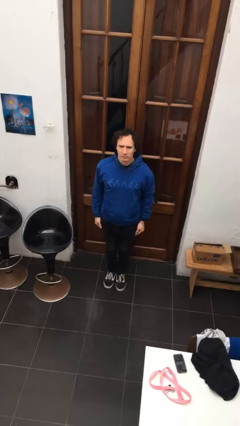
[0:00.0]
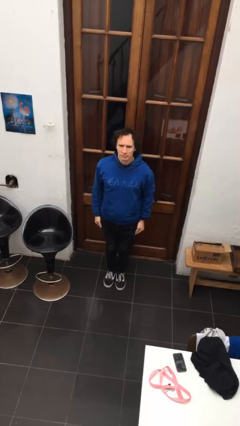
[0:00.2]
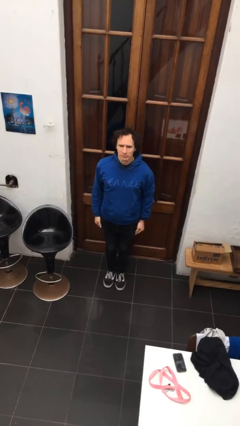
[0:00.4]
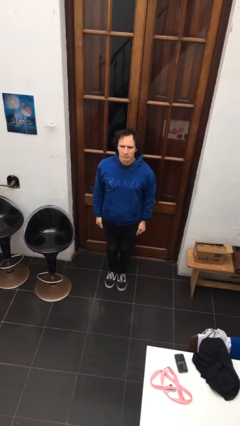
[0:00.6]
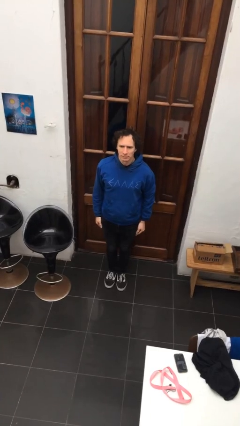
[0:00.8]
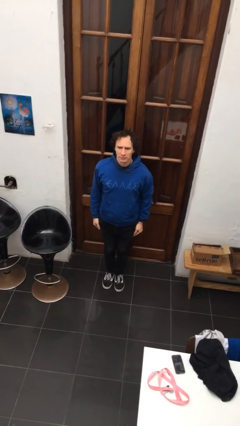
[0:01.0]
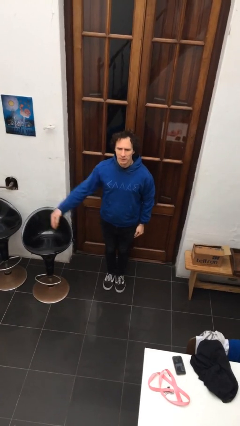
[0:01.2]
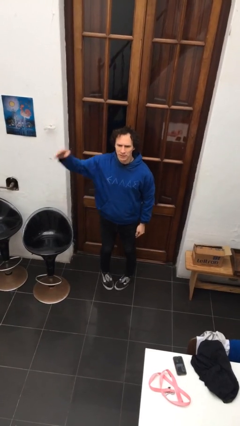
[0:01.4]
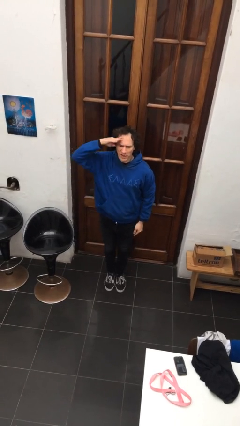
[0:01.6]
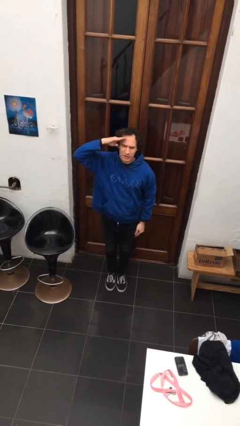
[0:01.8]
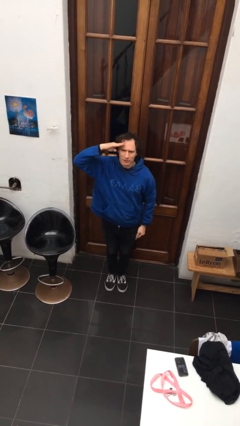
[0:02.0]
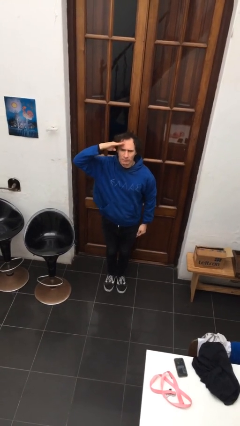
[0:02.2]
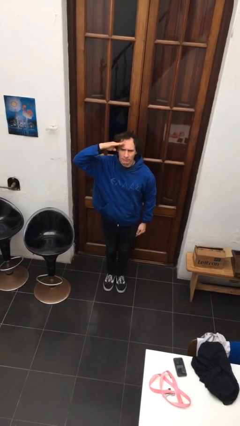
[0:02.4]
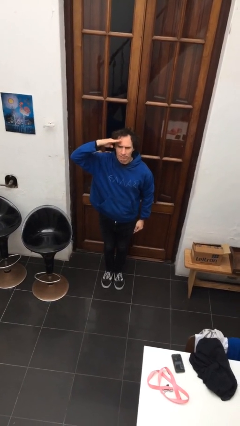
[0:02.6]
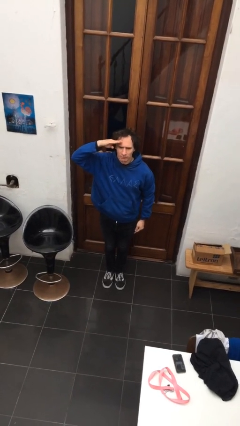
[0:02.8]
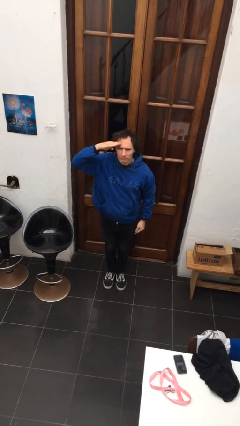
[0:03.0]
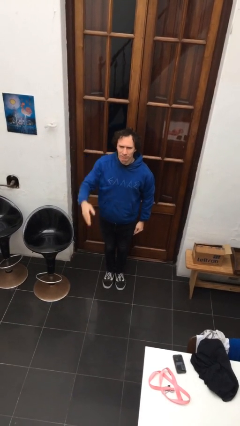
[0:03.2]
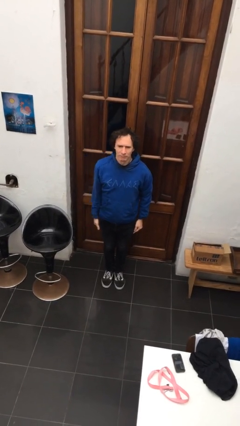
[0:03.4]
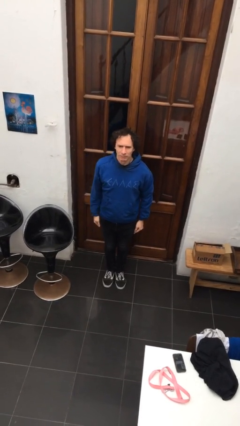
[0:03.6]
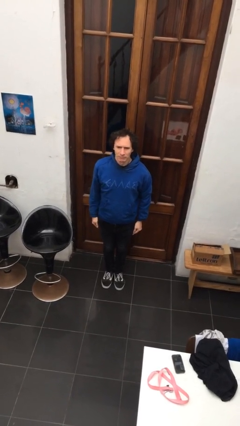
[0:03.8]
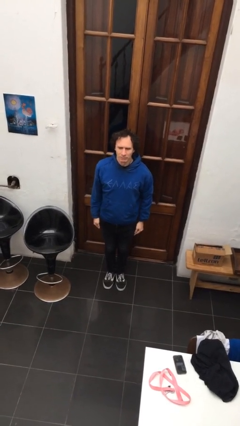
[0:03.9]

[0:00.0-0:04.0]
person salutes

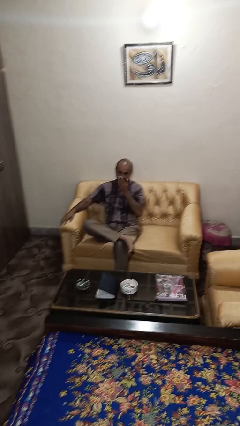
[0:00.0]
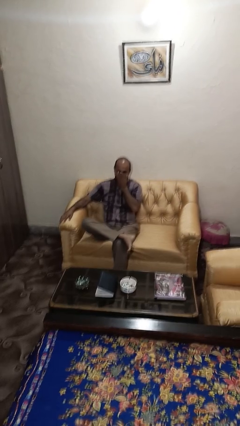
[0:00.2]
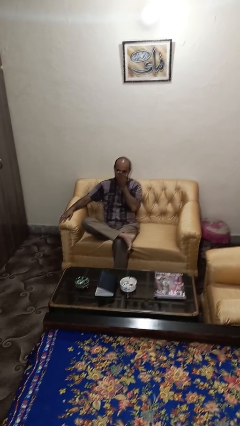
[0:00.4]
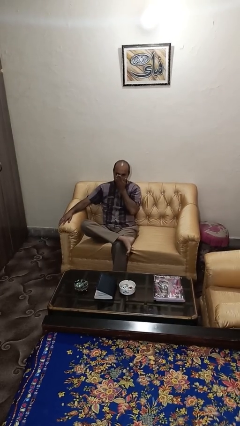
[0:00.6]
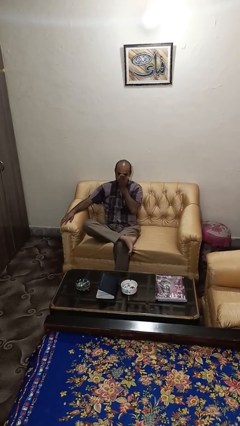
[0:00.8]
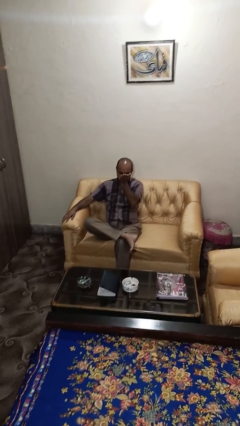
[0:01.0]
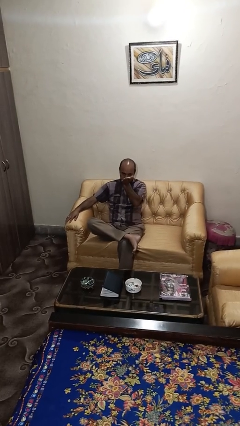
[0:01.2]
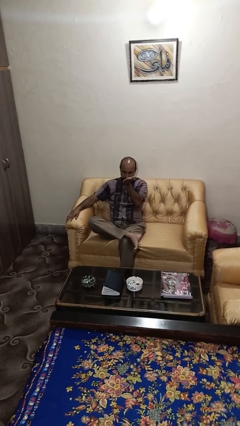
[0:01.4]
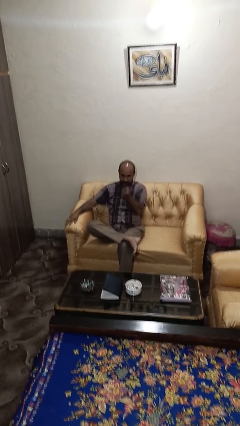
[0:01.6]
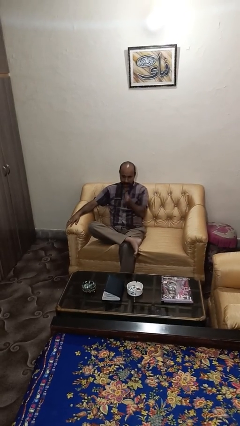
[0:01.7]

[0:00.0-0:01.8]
person gestures blow kiss

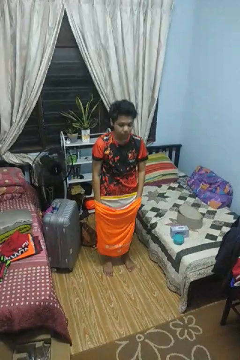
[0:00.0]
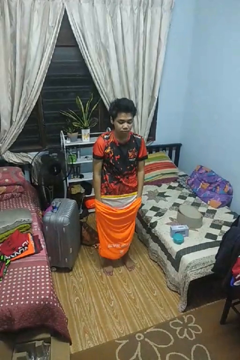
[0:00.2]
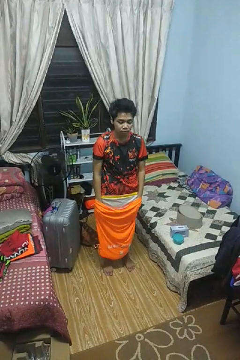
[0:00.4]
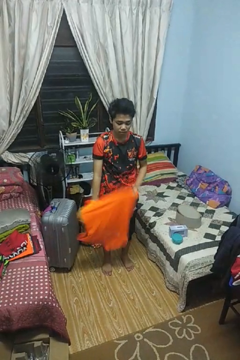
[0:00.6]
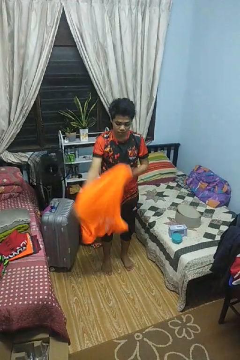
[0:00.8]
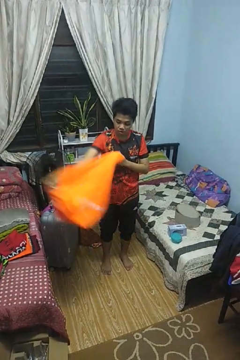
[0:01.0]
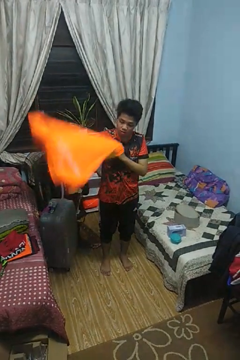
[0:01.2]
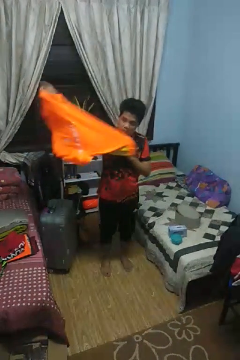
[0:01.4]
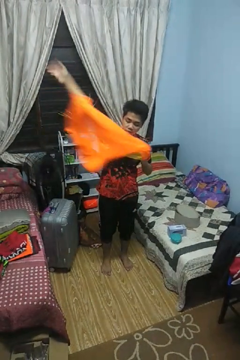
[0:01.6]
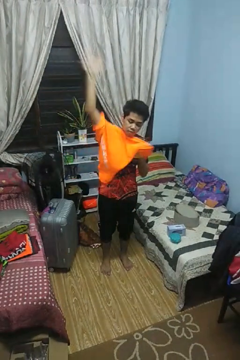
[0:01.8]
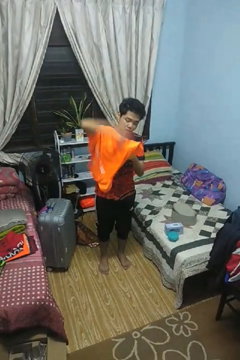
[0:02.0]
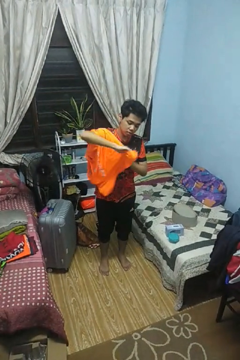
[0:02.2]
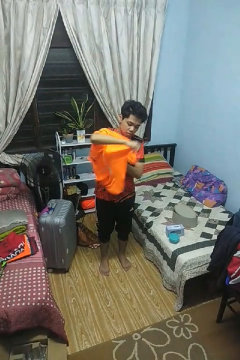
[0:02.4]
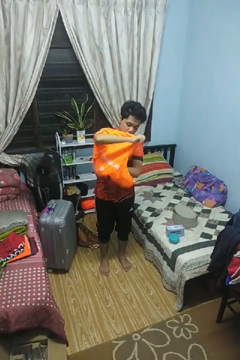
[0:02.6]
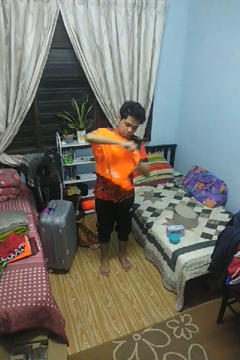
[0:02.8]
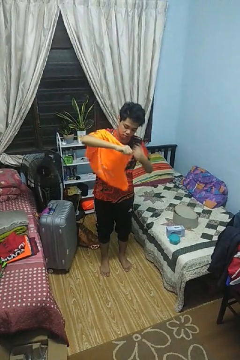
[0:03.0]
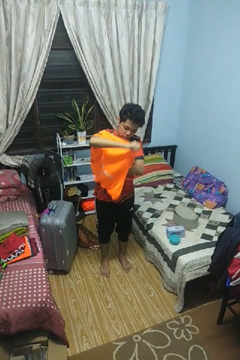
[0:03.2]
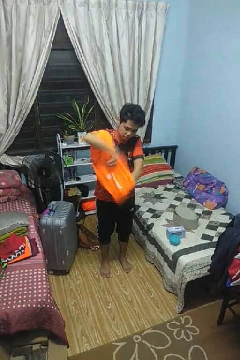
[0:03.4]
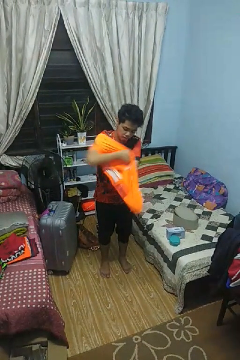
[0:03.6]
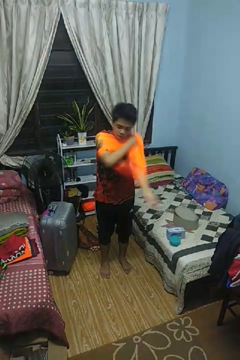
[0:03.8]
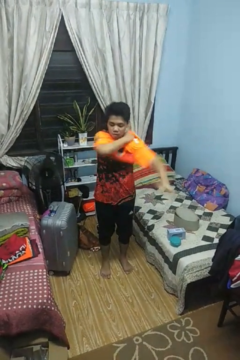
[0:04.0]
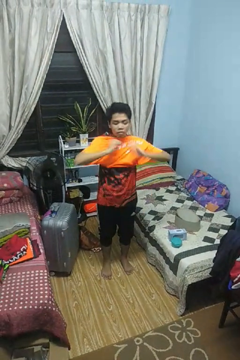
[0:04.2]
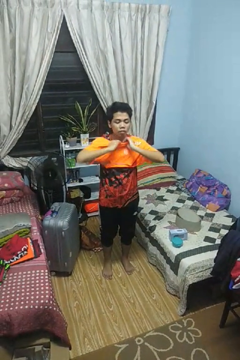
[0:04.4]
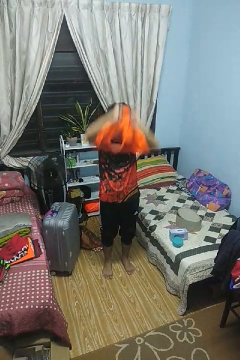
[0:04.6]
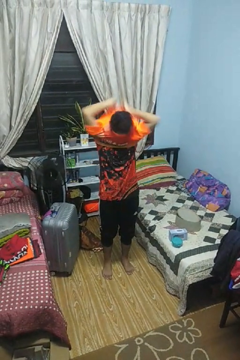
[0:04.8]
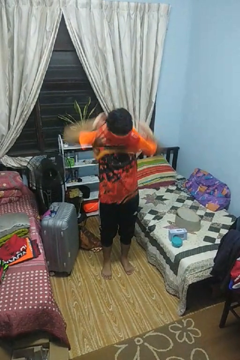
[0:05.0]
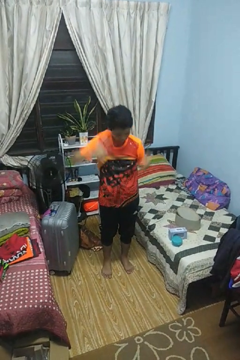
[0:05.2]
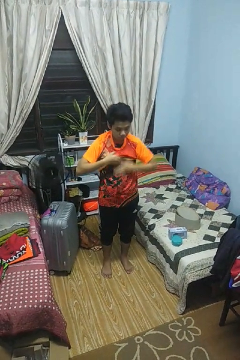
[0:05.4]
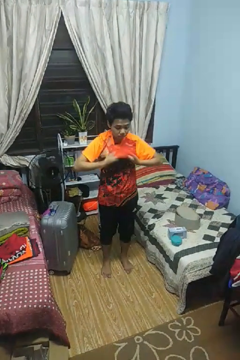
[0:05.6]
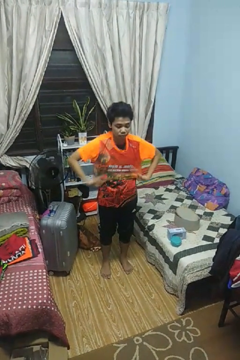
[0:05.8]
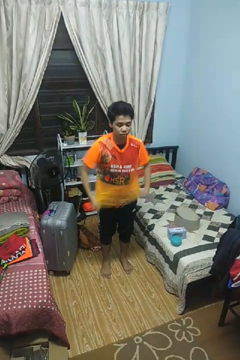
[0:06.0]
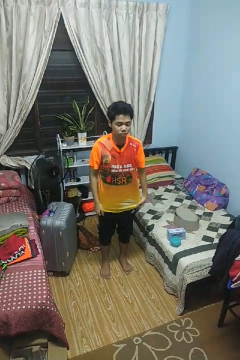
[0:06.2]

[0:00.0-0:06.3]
person puts on shirt

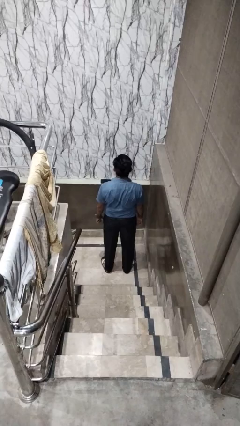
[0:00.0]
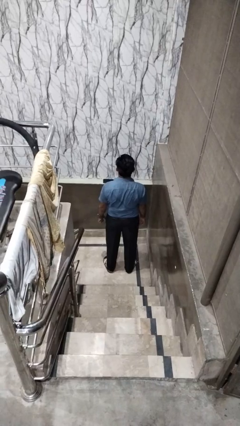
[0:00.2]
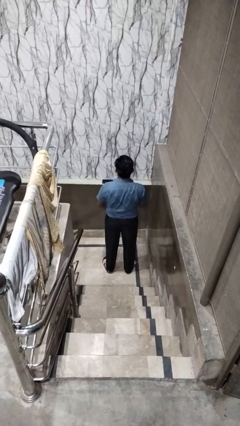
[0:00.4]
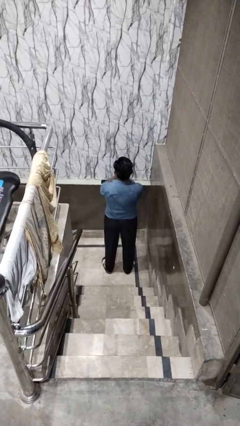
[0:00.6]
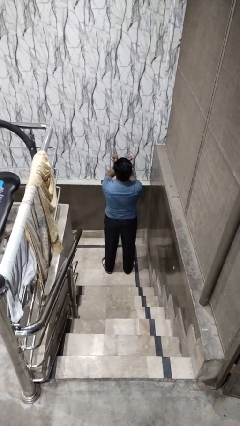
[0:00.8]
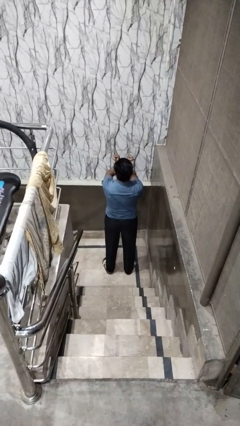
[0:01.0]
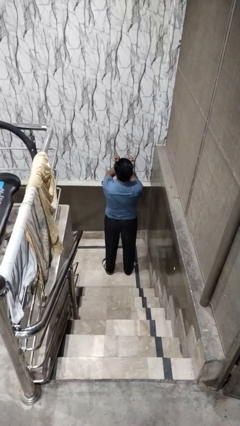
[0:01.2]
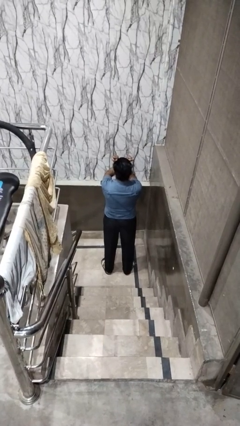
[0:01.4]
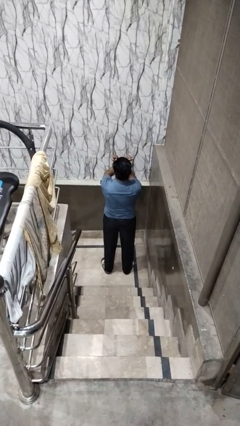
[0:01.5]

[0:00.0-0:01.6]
person gestures arms x

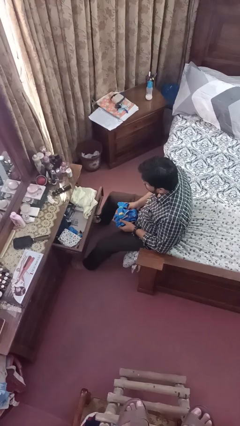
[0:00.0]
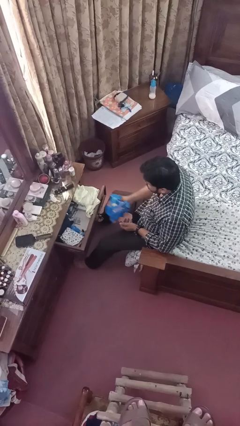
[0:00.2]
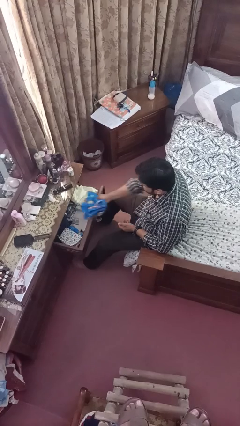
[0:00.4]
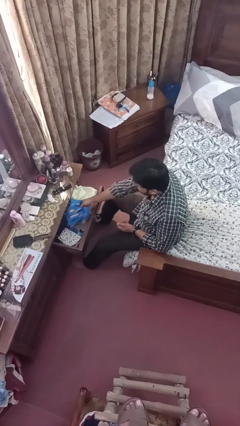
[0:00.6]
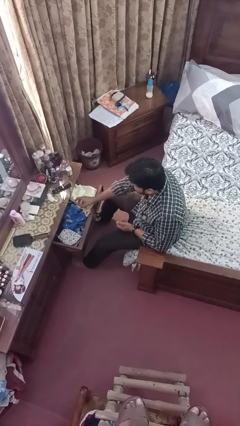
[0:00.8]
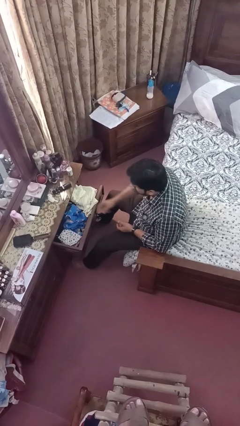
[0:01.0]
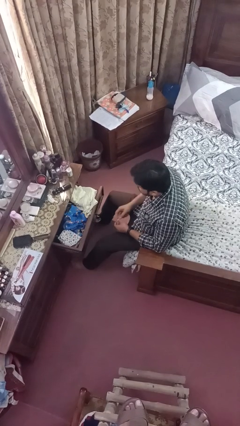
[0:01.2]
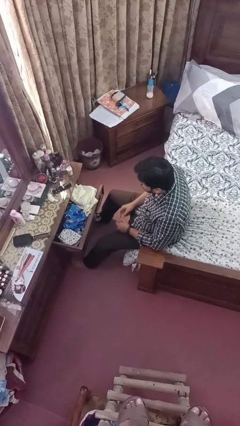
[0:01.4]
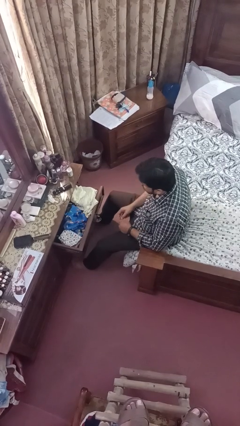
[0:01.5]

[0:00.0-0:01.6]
person puts clothes into dresser

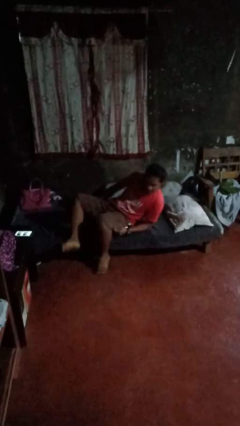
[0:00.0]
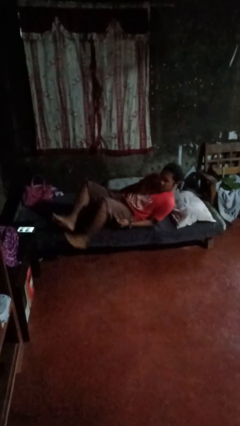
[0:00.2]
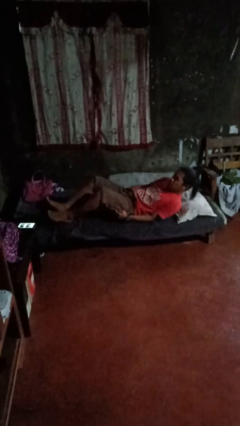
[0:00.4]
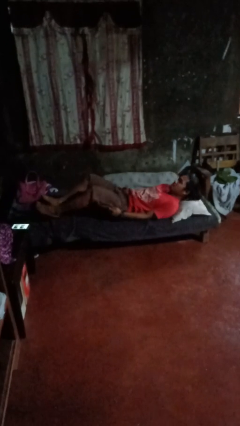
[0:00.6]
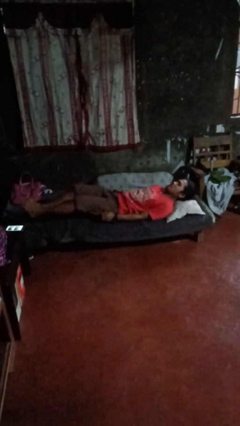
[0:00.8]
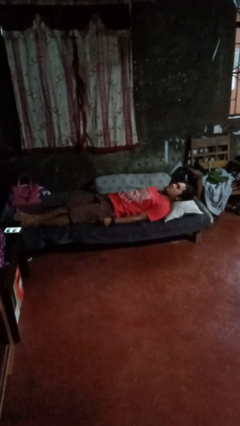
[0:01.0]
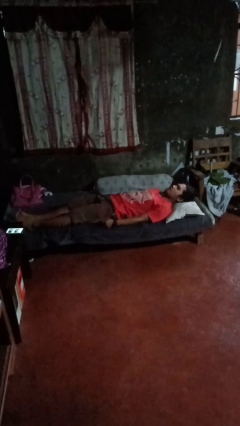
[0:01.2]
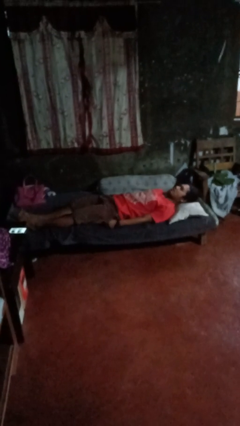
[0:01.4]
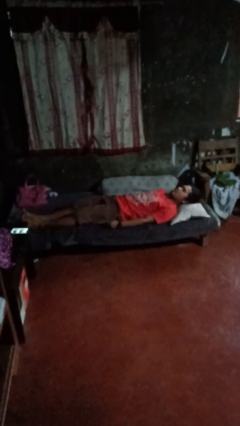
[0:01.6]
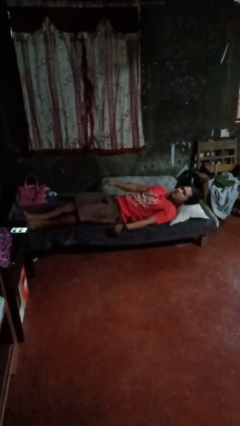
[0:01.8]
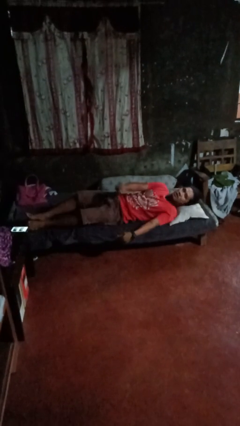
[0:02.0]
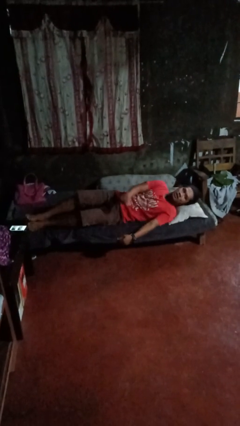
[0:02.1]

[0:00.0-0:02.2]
person lies down on bed

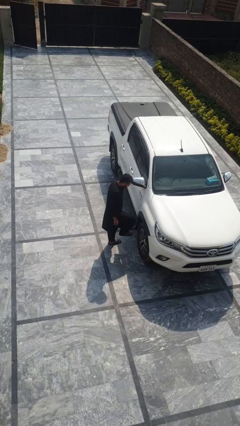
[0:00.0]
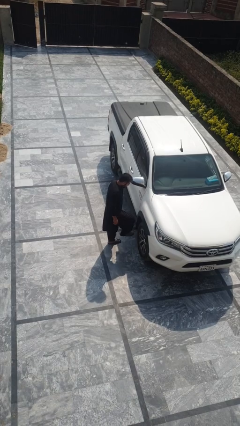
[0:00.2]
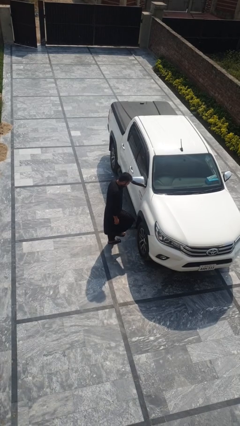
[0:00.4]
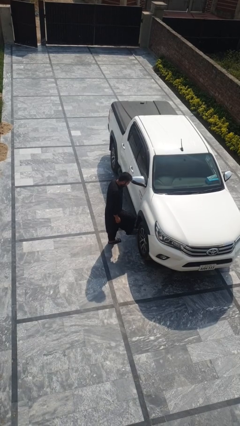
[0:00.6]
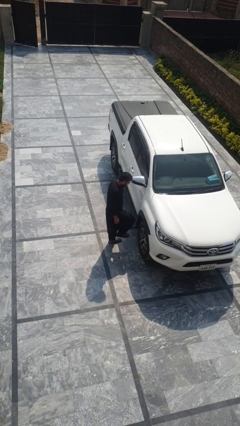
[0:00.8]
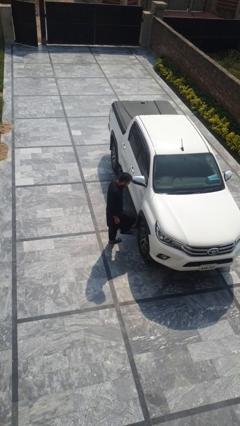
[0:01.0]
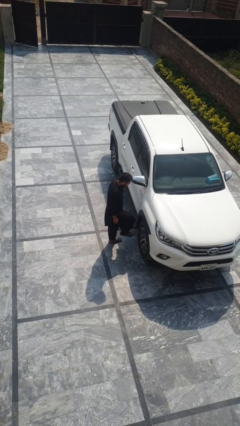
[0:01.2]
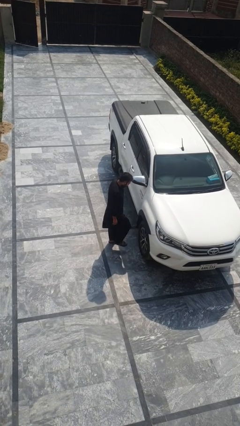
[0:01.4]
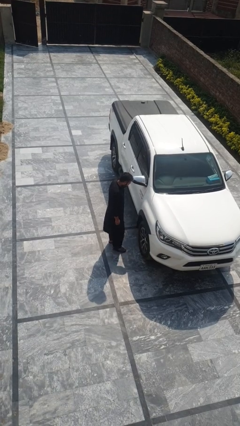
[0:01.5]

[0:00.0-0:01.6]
person kicks car tires
